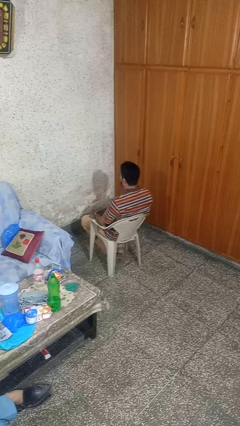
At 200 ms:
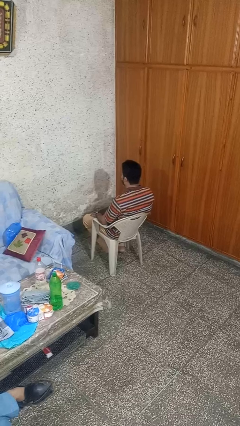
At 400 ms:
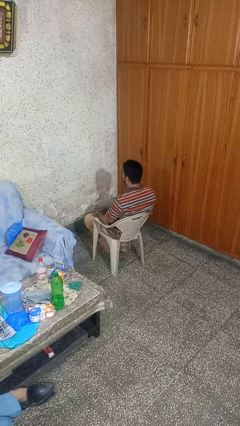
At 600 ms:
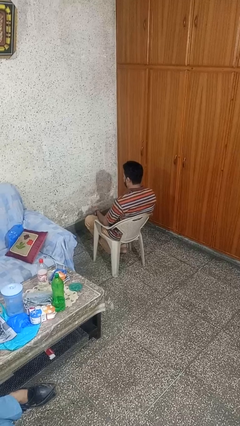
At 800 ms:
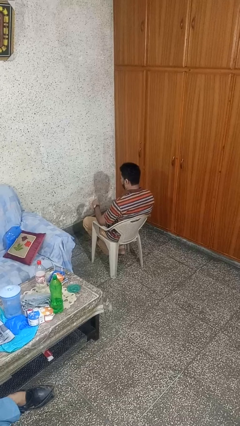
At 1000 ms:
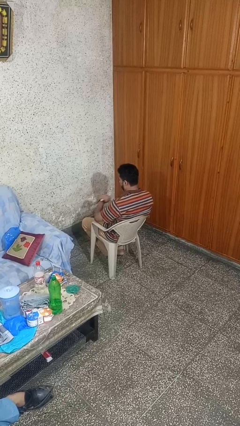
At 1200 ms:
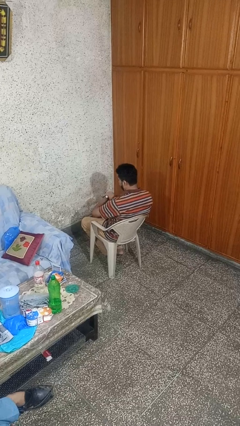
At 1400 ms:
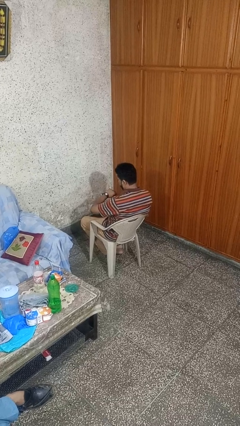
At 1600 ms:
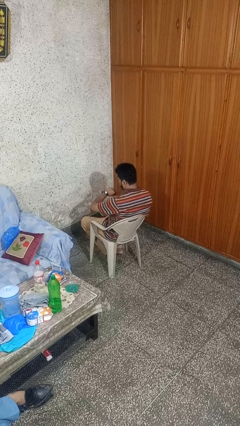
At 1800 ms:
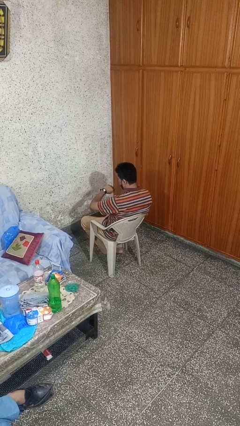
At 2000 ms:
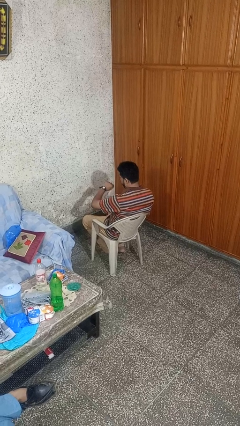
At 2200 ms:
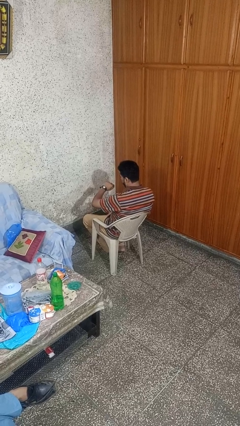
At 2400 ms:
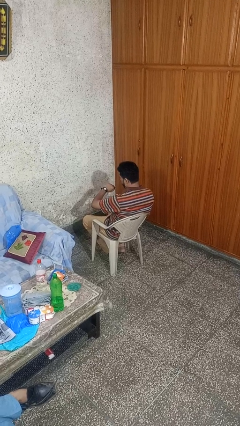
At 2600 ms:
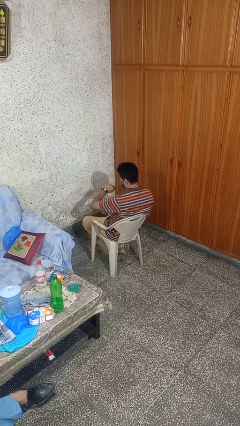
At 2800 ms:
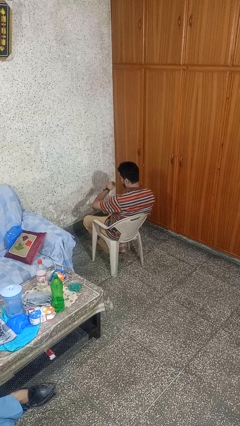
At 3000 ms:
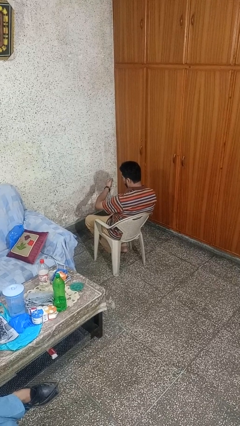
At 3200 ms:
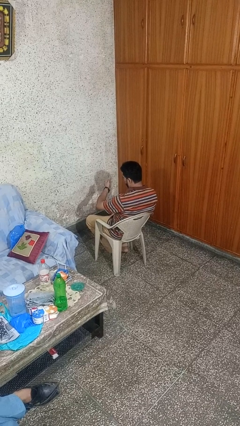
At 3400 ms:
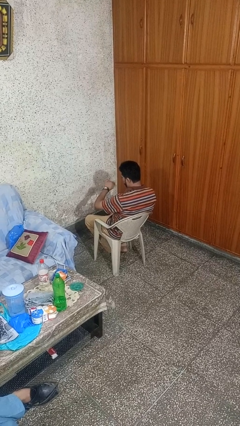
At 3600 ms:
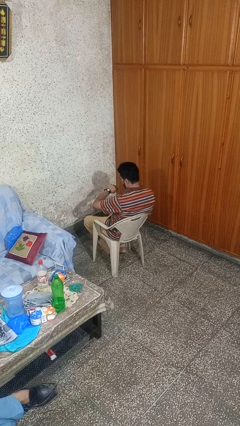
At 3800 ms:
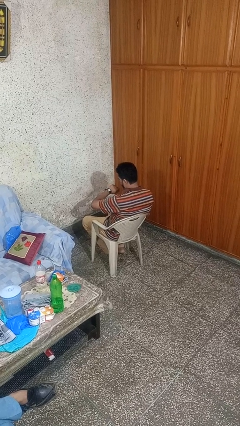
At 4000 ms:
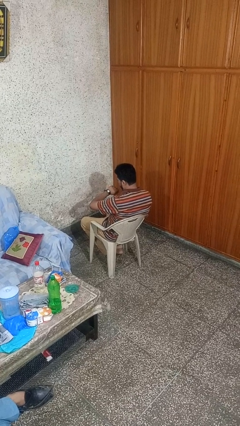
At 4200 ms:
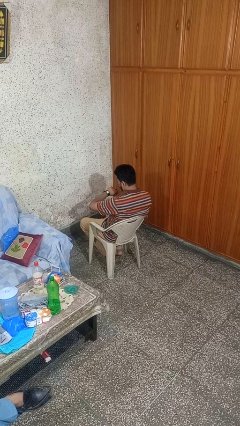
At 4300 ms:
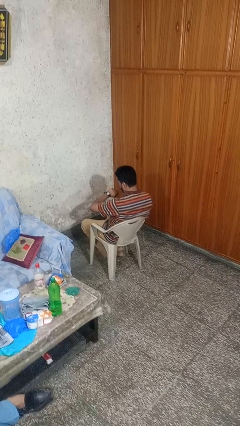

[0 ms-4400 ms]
person looks at wristwatch

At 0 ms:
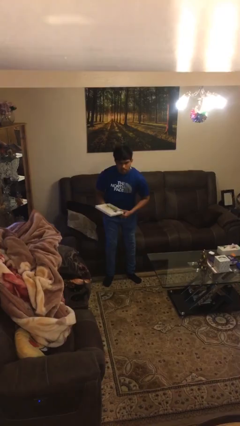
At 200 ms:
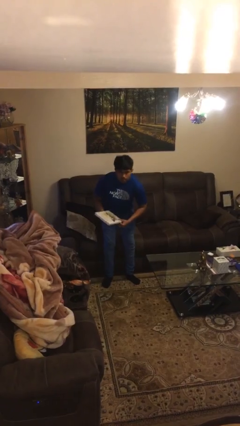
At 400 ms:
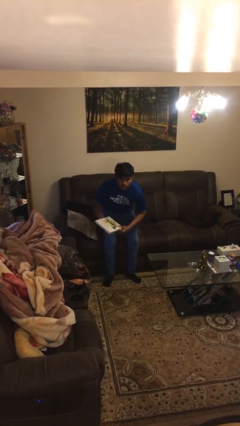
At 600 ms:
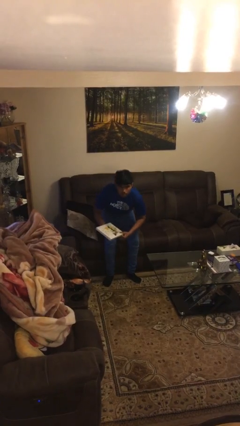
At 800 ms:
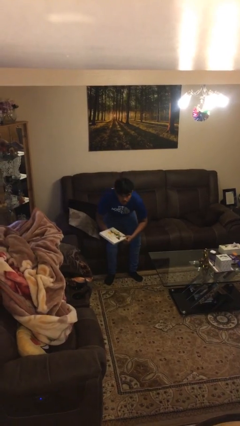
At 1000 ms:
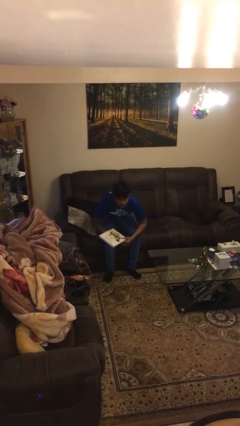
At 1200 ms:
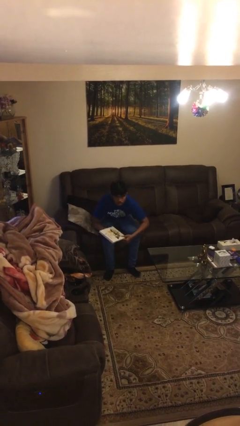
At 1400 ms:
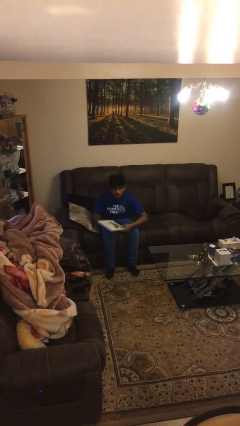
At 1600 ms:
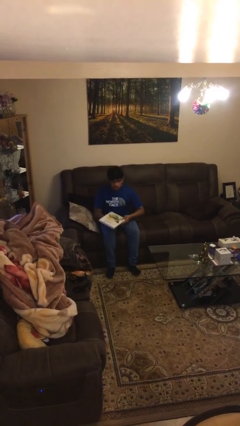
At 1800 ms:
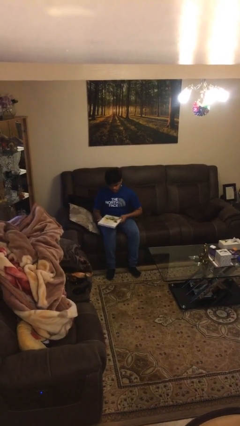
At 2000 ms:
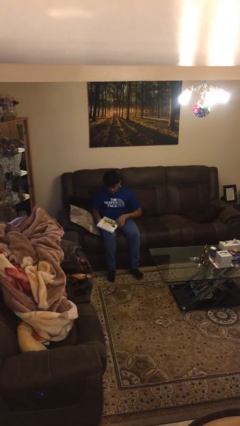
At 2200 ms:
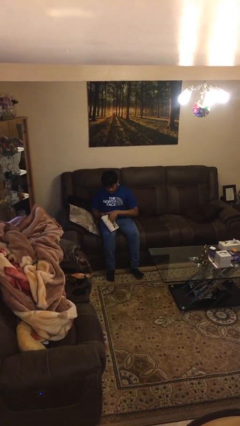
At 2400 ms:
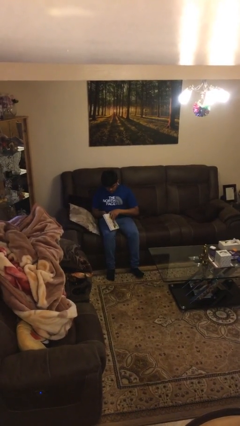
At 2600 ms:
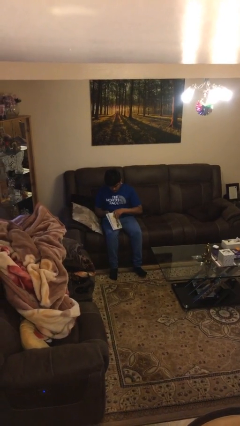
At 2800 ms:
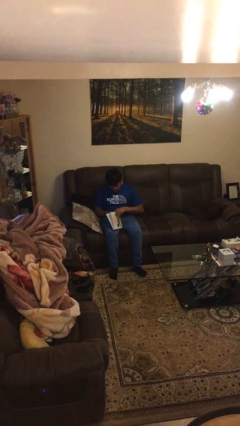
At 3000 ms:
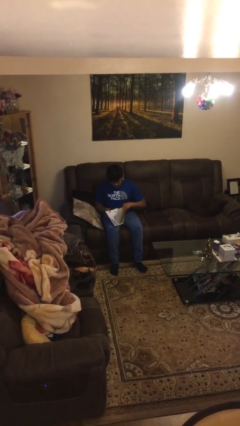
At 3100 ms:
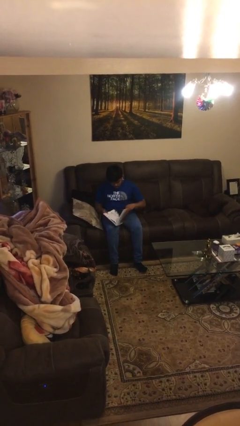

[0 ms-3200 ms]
person sits down

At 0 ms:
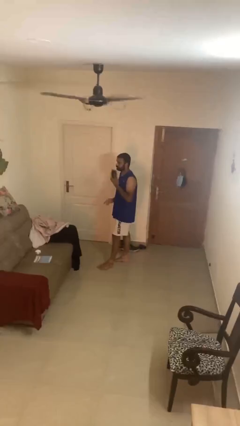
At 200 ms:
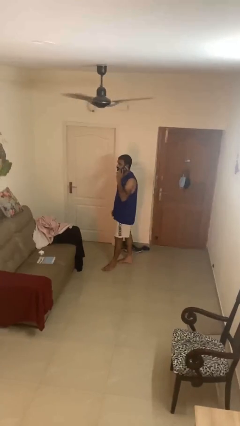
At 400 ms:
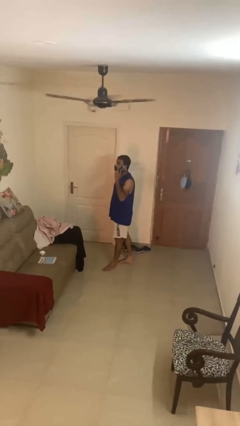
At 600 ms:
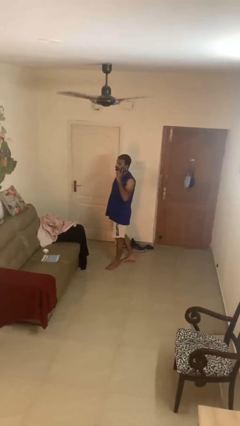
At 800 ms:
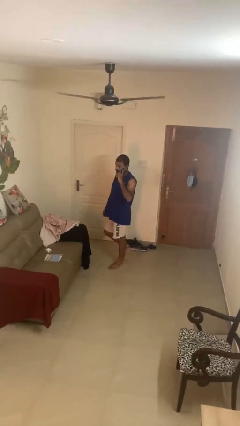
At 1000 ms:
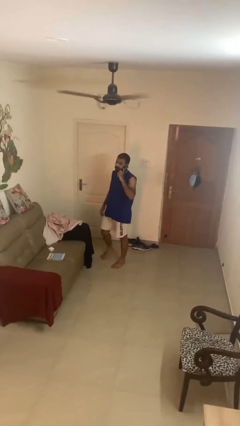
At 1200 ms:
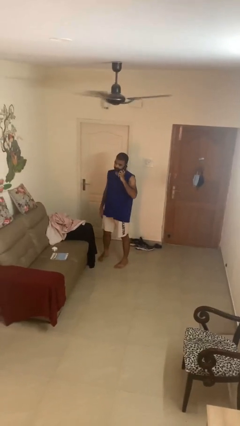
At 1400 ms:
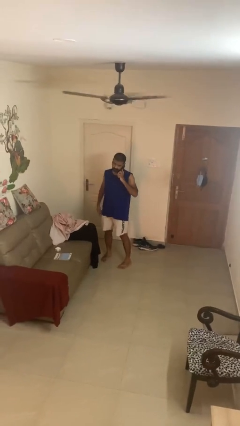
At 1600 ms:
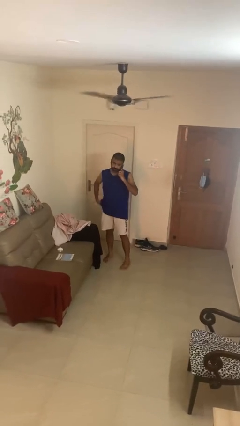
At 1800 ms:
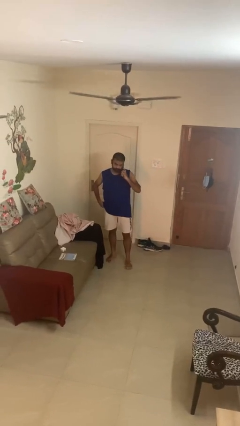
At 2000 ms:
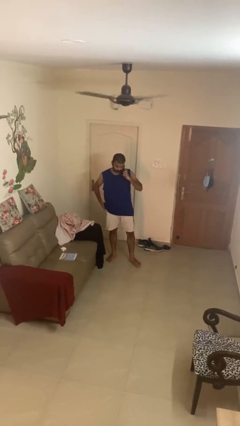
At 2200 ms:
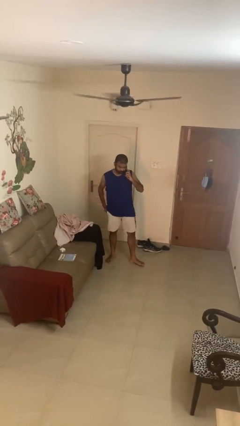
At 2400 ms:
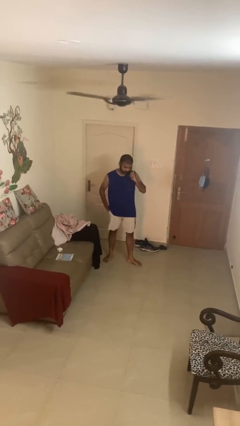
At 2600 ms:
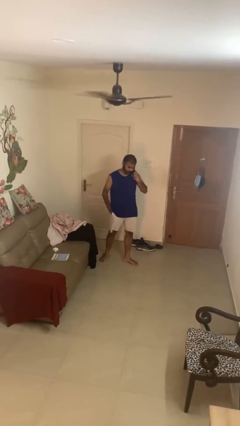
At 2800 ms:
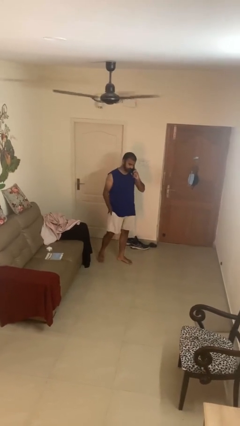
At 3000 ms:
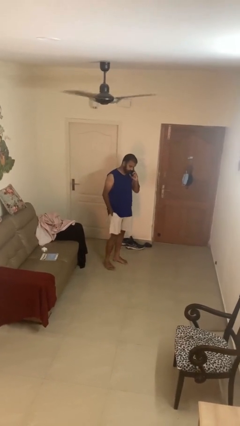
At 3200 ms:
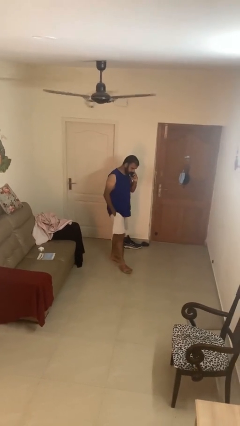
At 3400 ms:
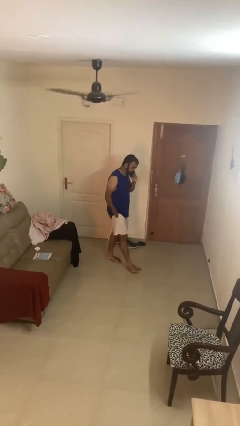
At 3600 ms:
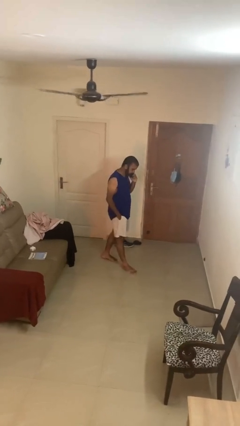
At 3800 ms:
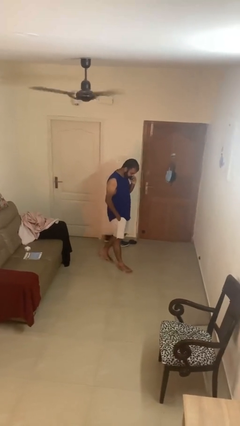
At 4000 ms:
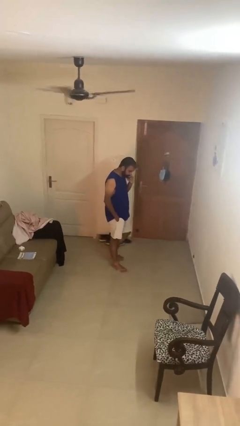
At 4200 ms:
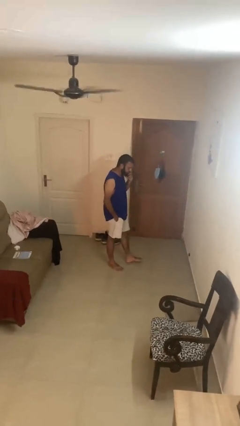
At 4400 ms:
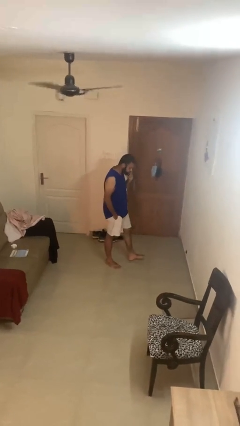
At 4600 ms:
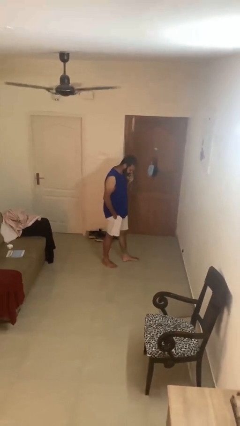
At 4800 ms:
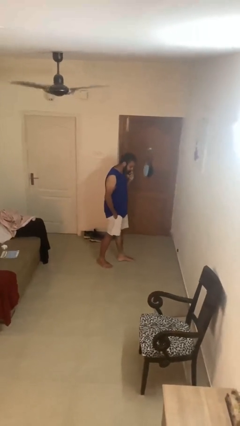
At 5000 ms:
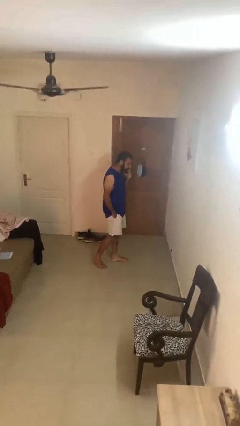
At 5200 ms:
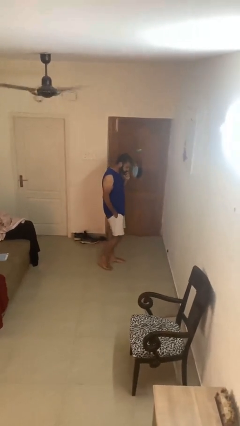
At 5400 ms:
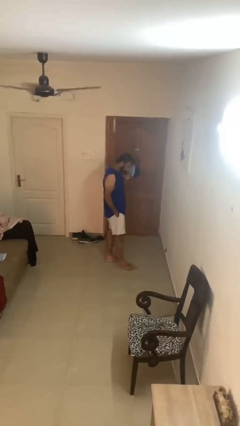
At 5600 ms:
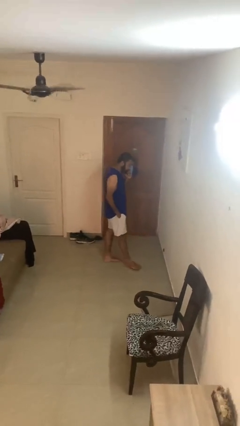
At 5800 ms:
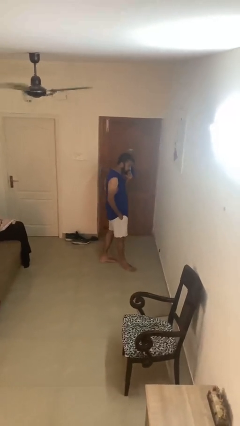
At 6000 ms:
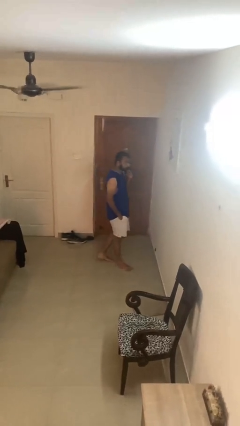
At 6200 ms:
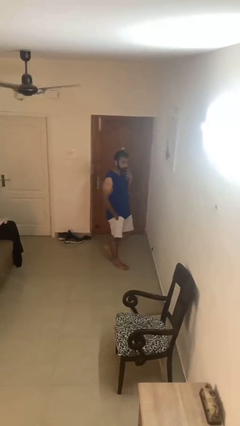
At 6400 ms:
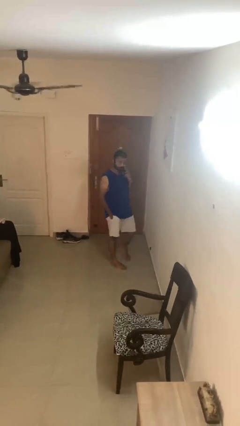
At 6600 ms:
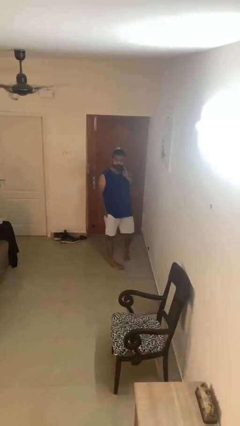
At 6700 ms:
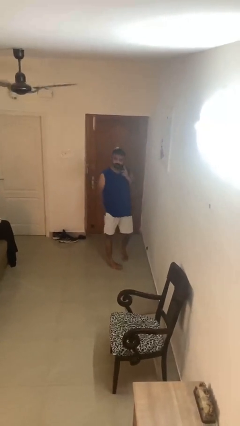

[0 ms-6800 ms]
person talks on phone

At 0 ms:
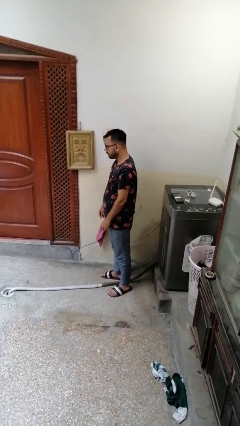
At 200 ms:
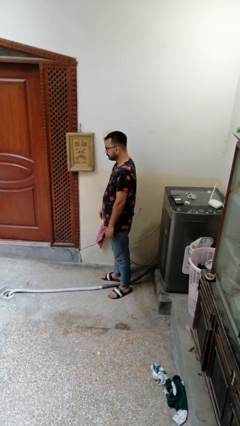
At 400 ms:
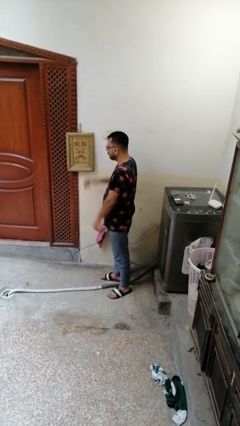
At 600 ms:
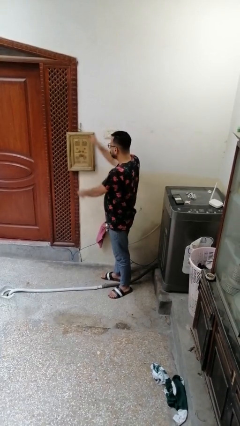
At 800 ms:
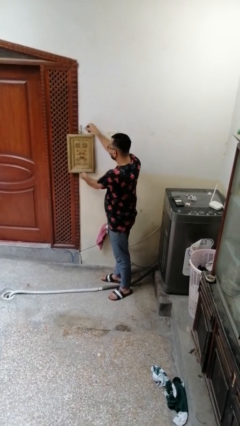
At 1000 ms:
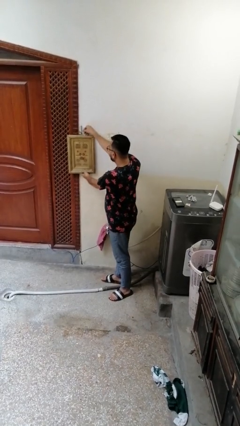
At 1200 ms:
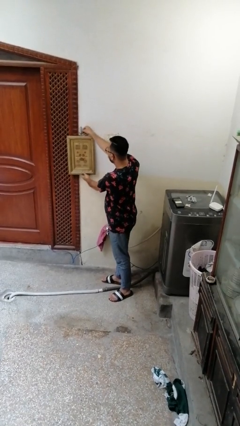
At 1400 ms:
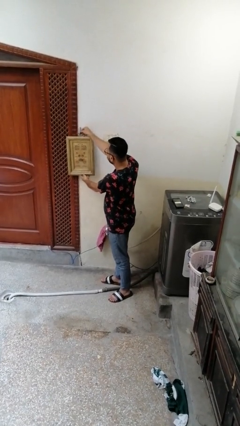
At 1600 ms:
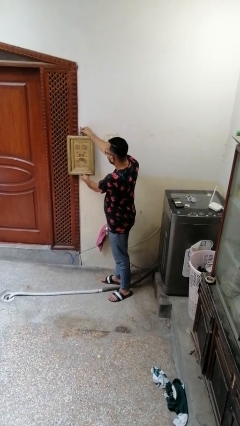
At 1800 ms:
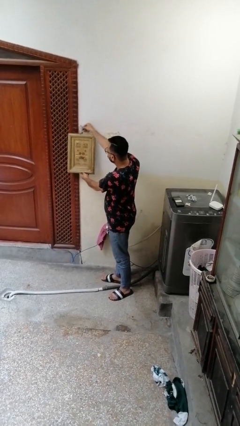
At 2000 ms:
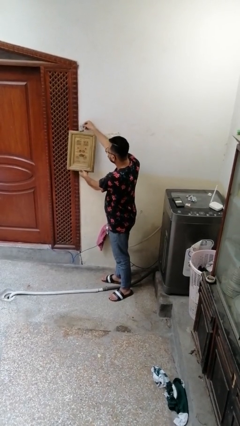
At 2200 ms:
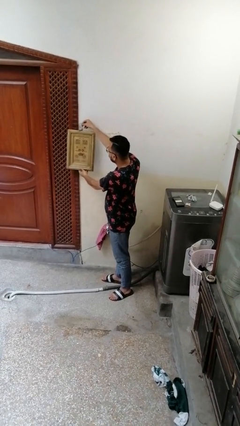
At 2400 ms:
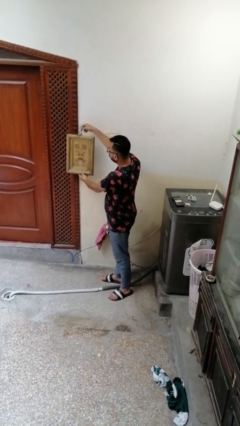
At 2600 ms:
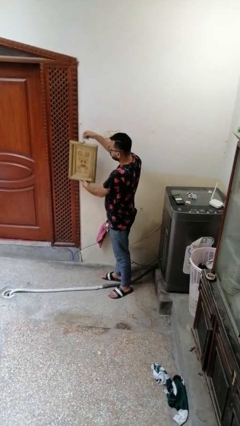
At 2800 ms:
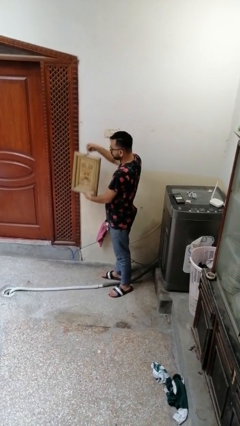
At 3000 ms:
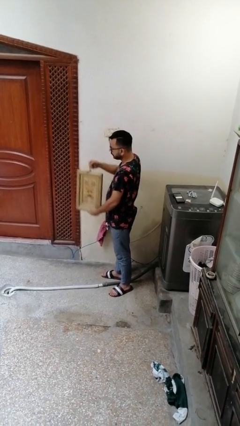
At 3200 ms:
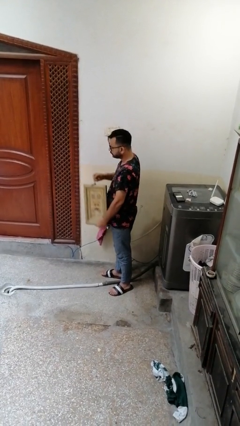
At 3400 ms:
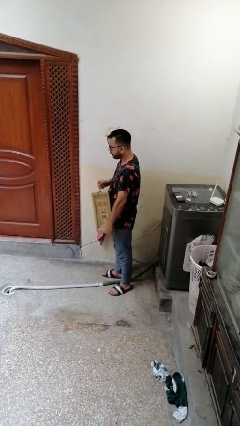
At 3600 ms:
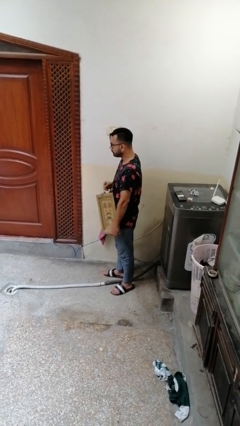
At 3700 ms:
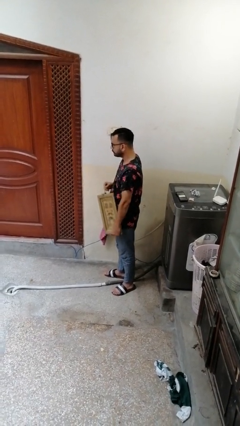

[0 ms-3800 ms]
person takes down picture frame
